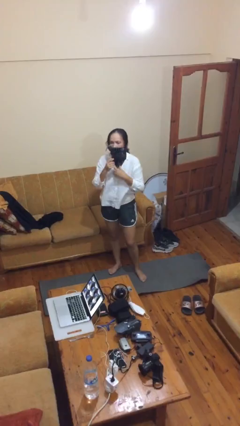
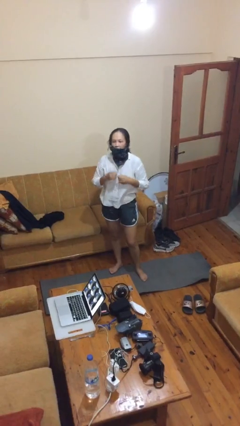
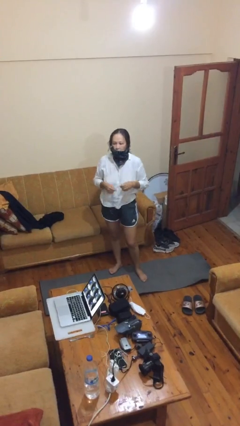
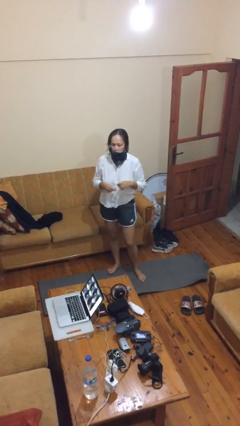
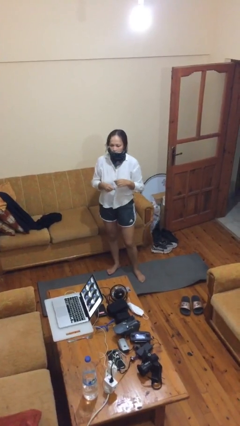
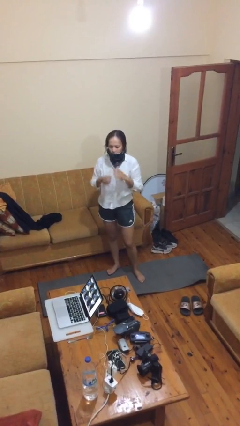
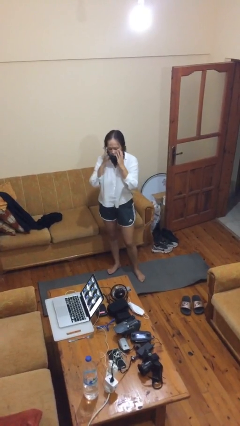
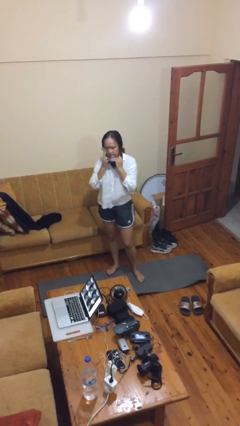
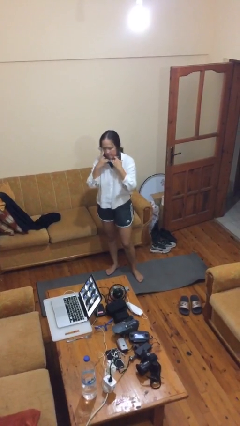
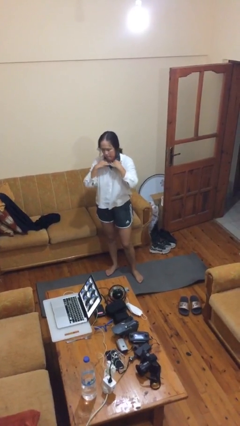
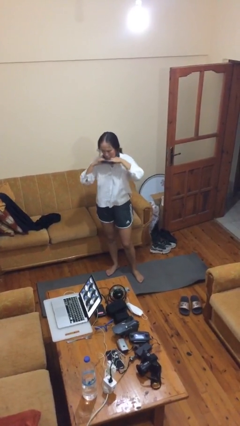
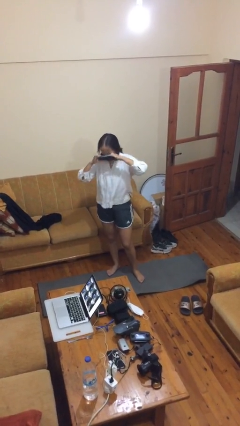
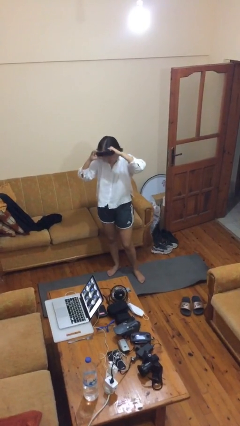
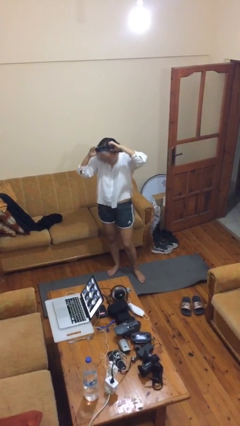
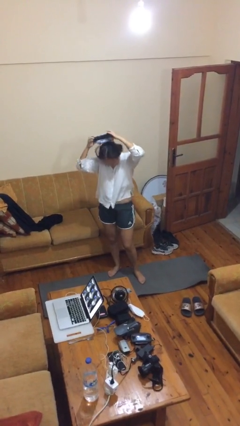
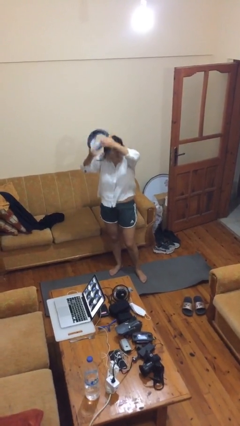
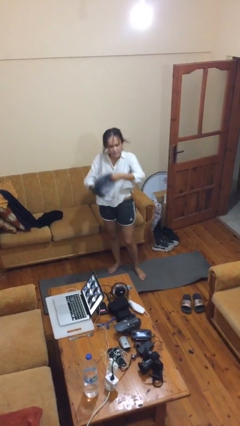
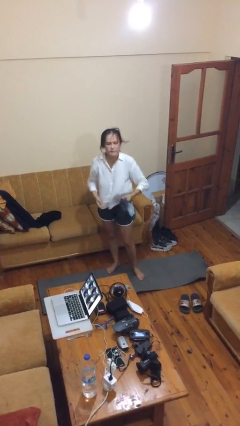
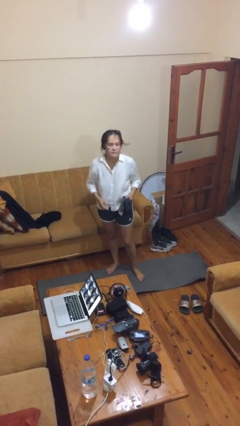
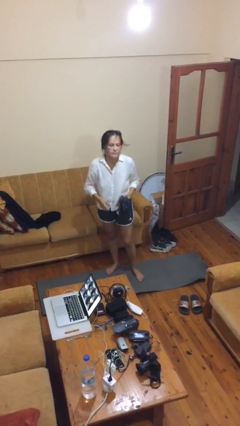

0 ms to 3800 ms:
person takes off scarf

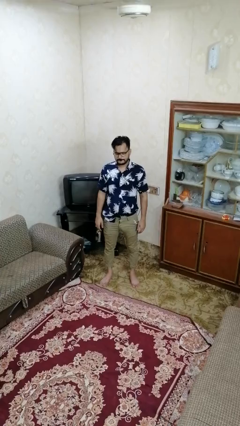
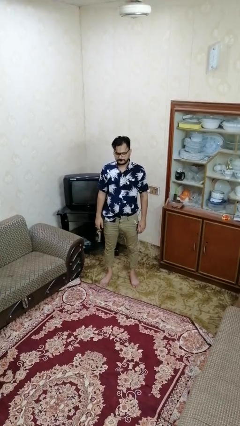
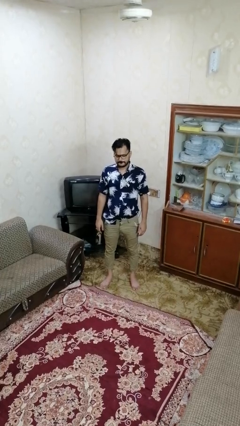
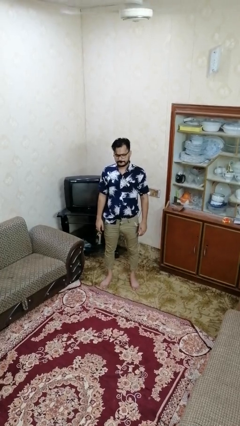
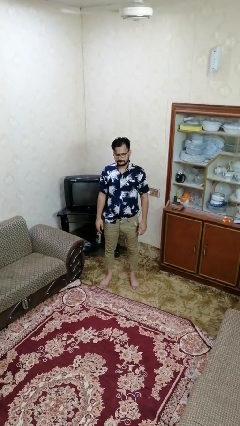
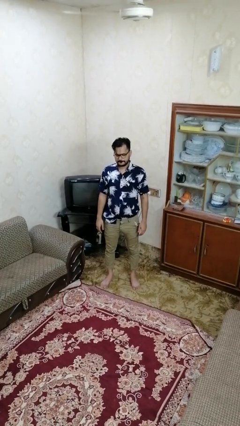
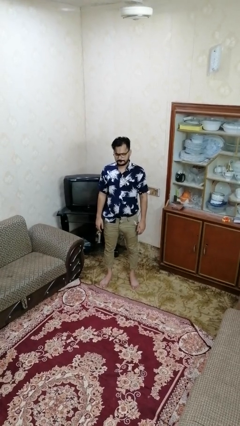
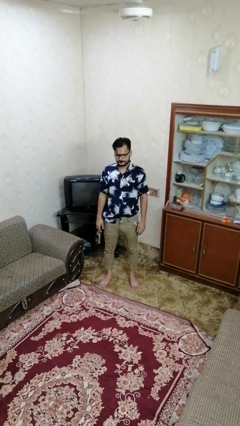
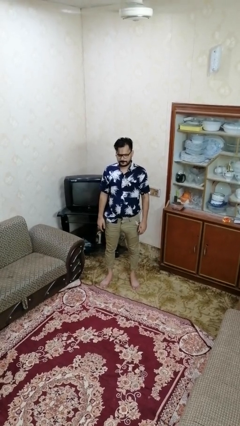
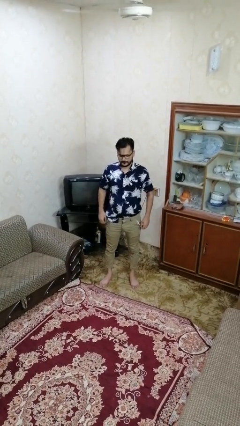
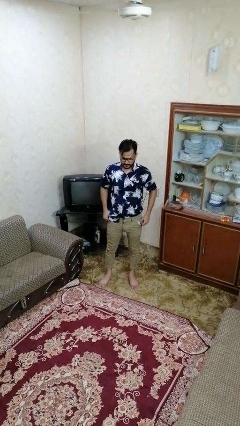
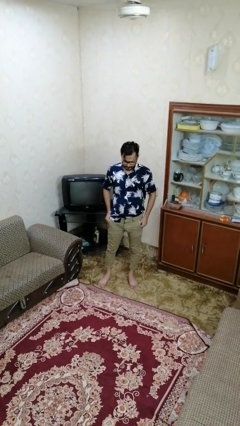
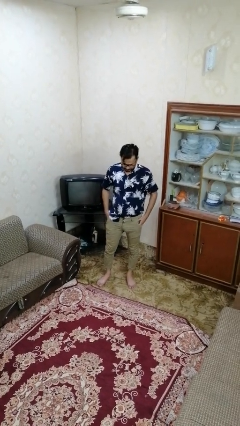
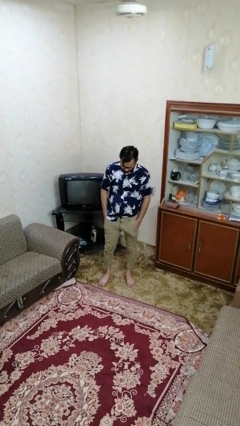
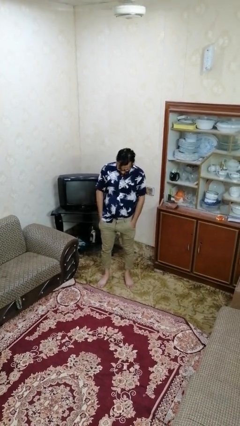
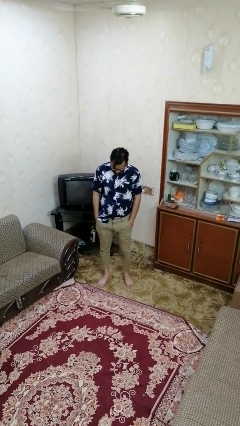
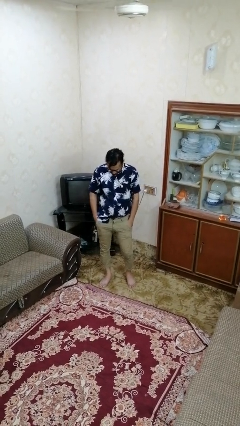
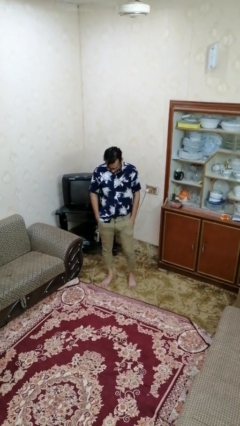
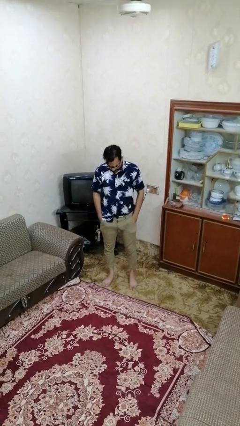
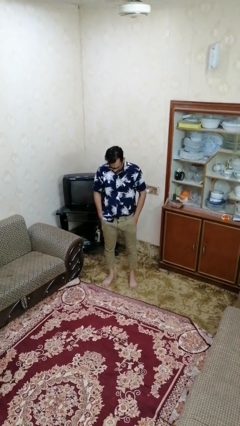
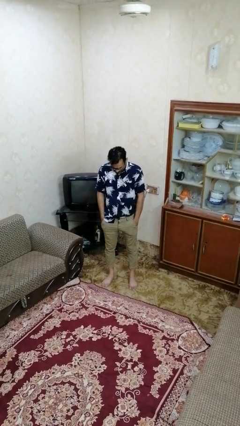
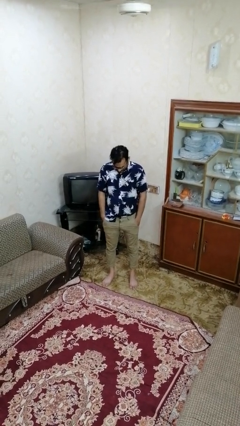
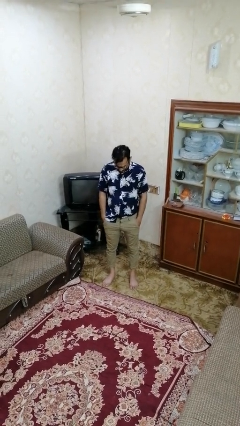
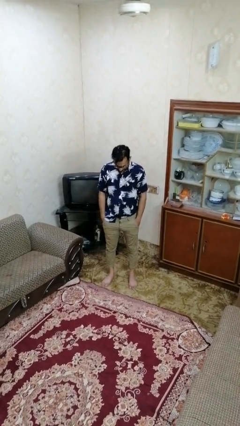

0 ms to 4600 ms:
person puts hands in back pockets

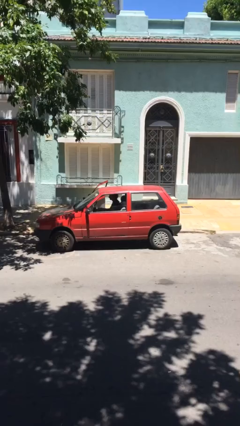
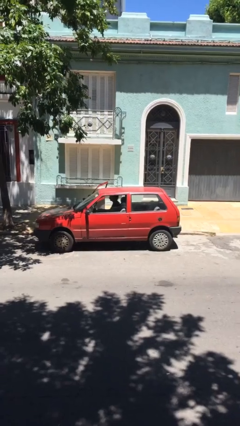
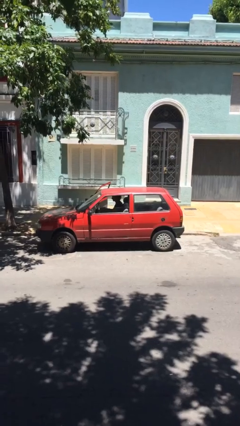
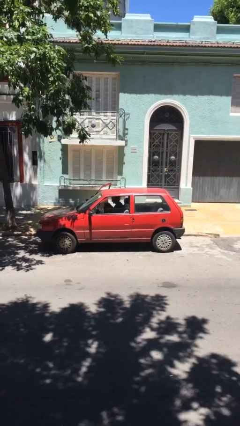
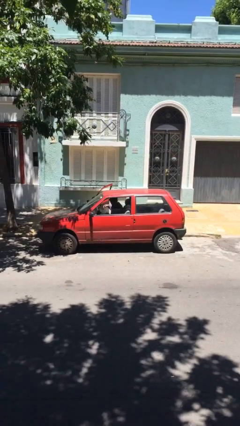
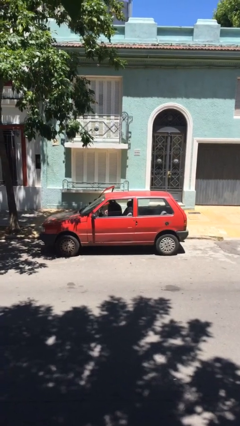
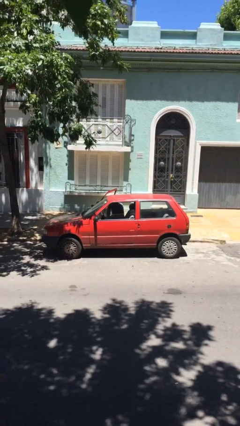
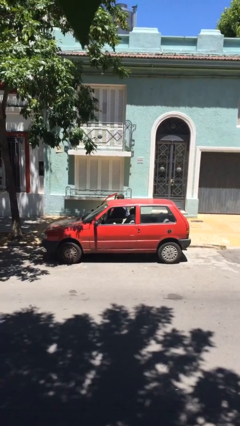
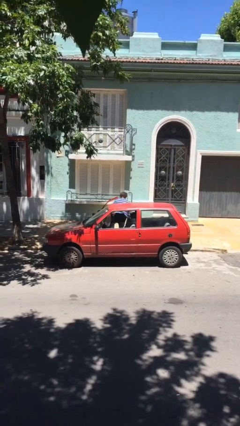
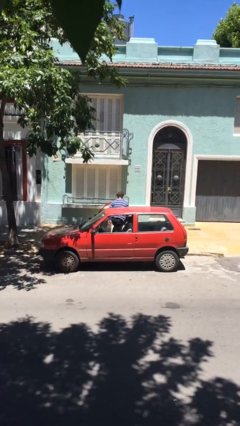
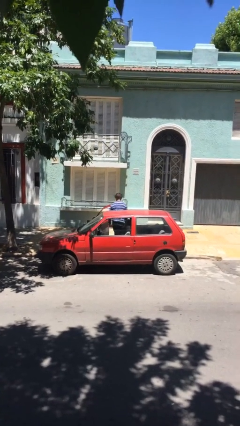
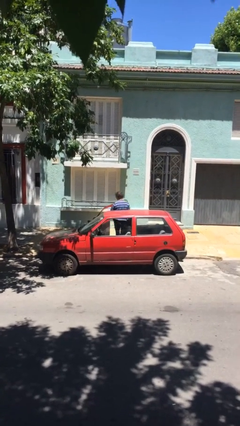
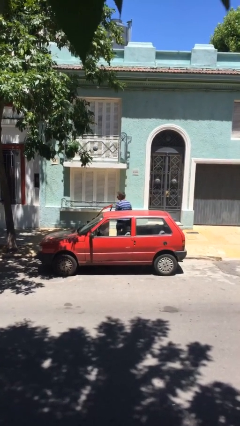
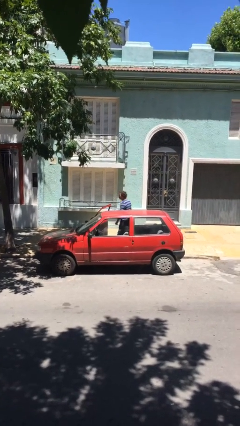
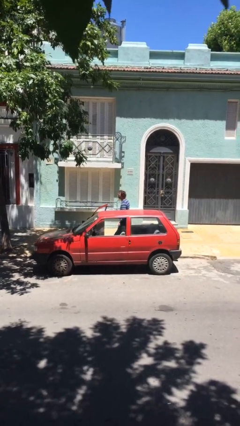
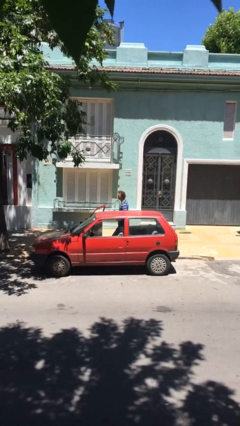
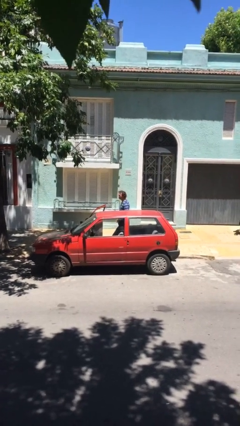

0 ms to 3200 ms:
person exits car

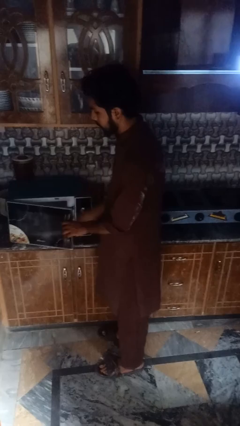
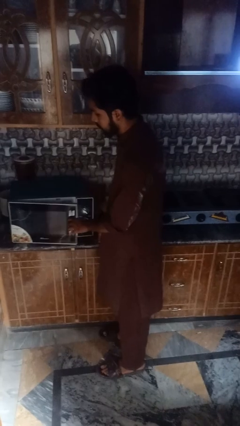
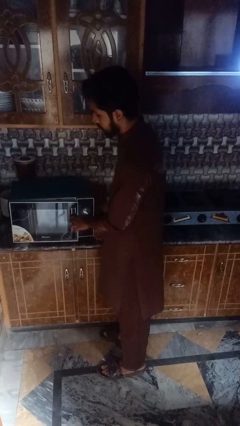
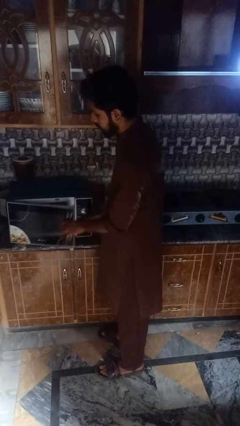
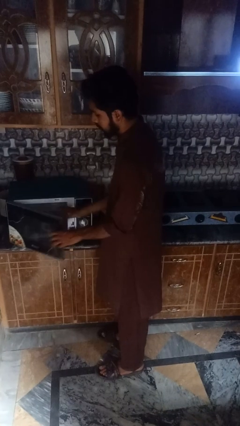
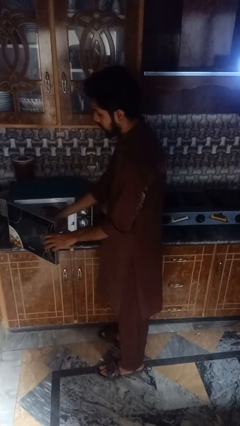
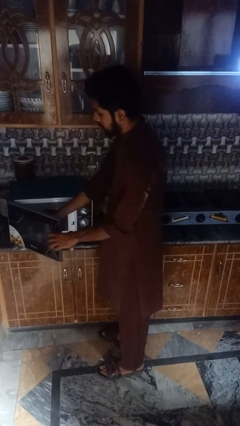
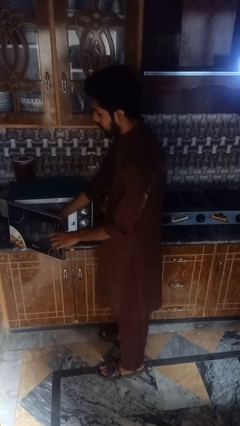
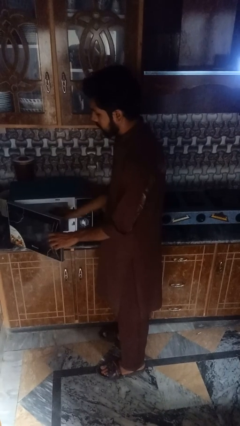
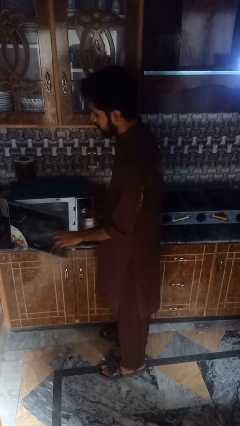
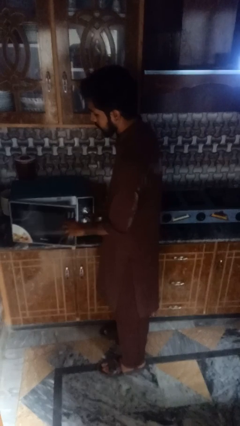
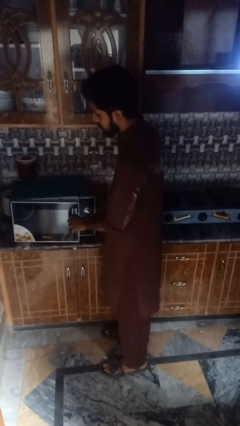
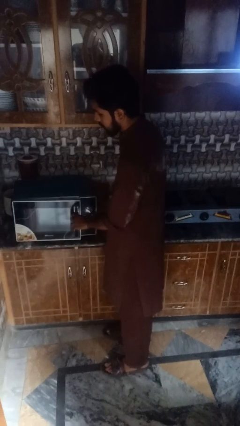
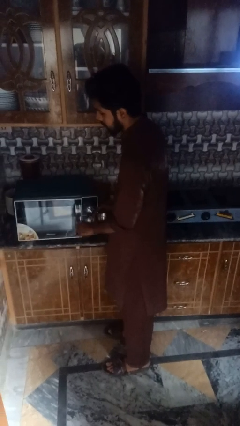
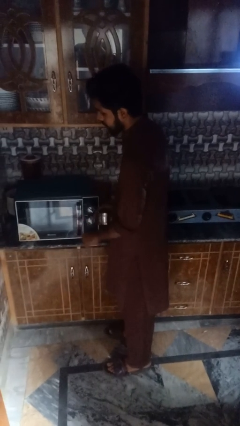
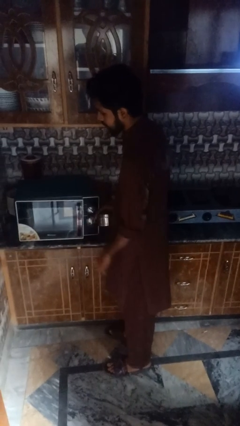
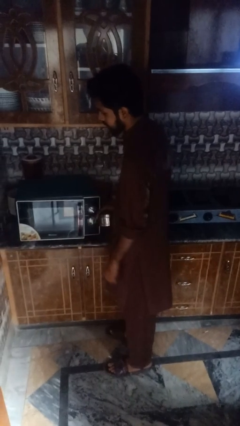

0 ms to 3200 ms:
person takes object from microwave

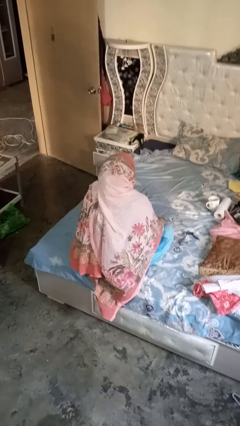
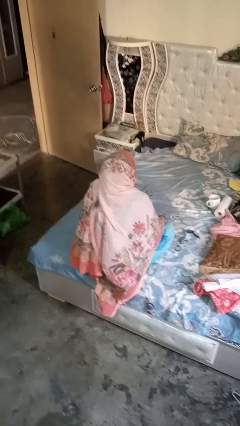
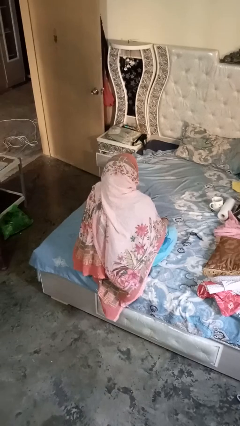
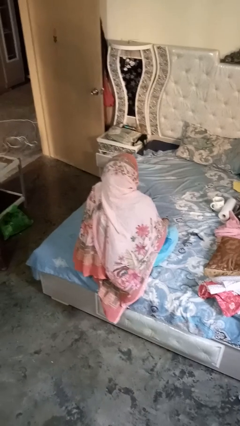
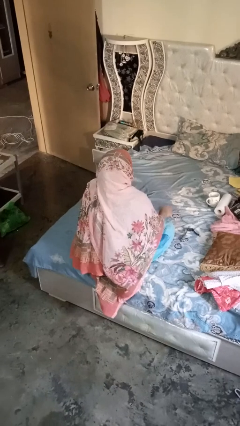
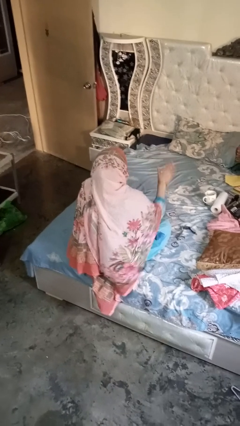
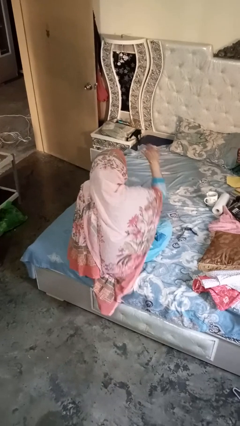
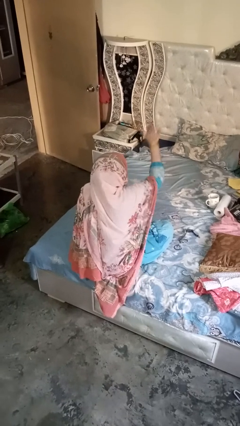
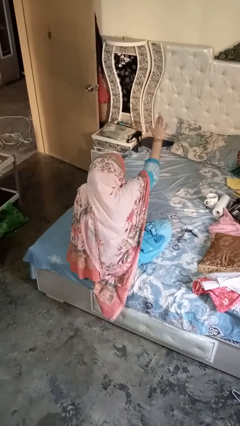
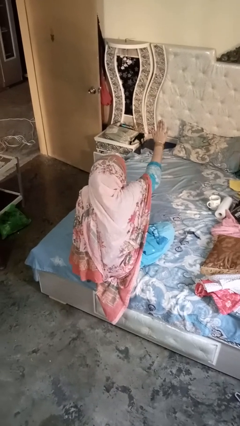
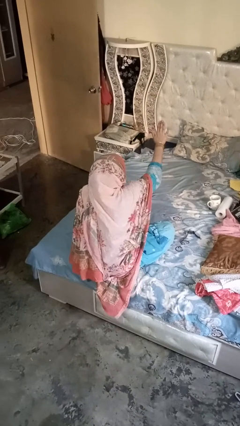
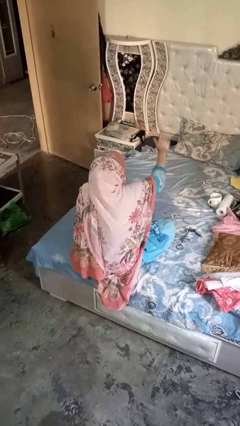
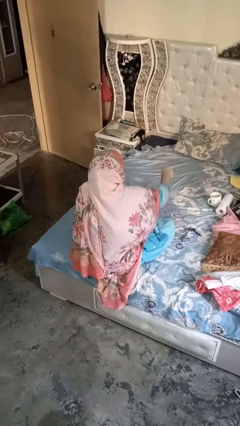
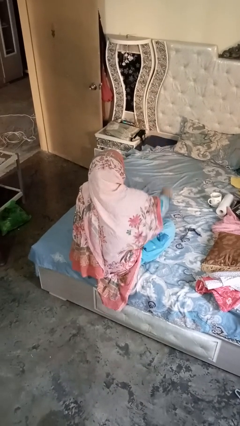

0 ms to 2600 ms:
person gestures stop
